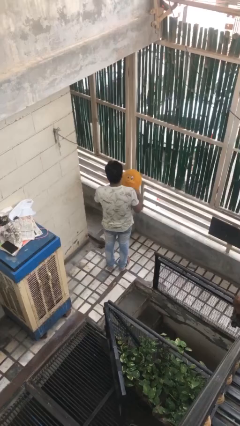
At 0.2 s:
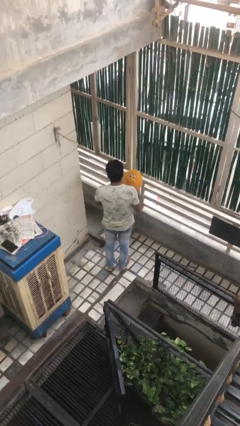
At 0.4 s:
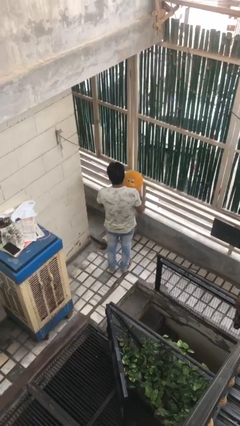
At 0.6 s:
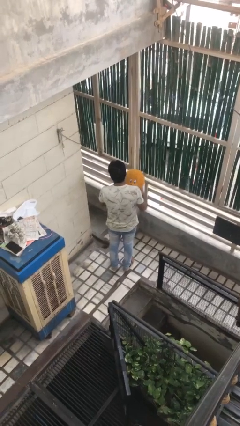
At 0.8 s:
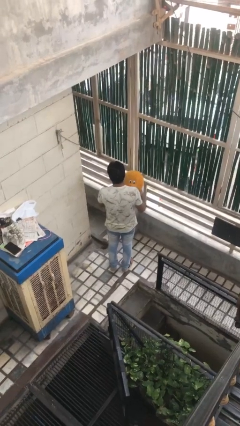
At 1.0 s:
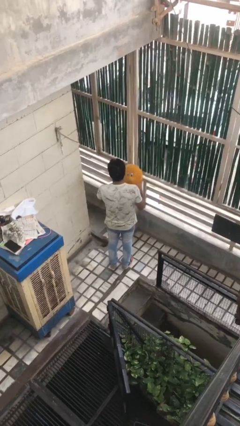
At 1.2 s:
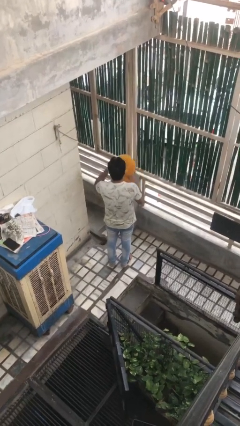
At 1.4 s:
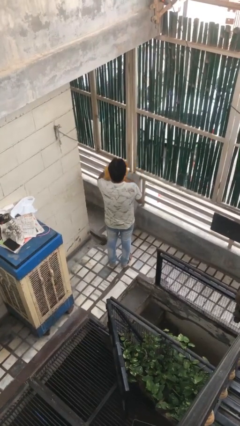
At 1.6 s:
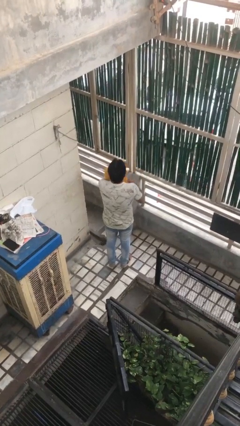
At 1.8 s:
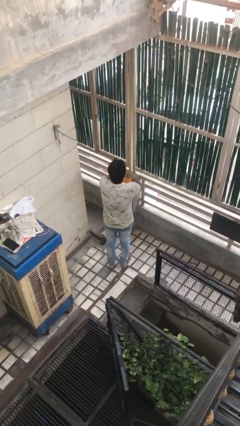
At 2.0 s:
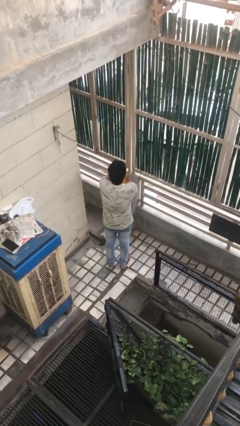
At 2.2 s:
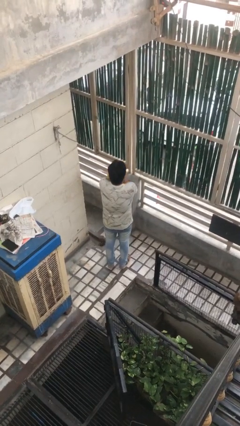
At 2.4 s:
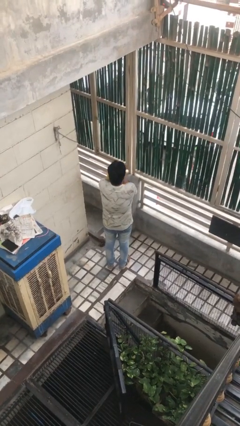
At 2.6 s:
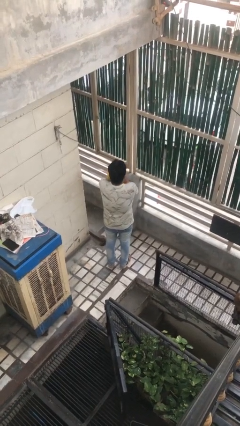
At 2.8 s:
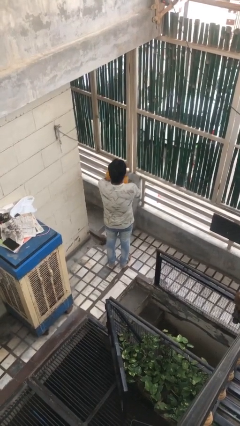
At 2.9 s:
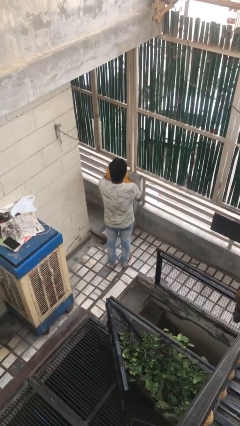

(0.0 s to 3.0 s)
person hugs stuffed animal

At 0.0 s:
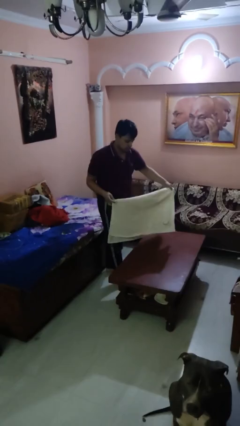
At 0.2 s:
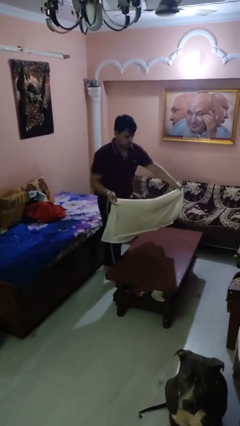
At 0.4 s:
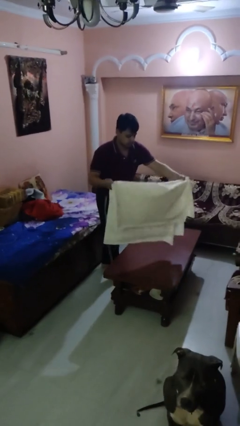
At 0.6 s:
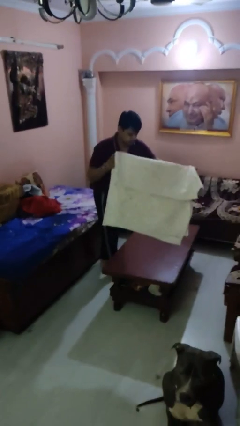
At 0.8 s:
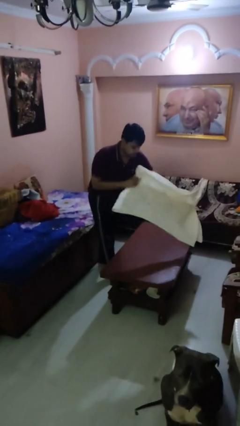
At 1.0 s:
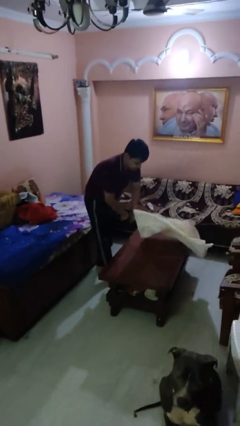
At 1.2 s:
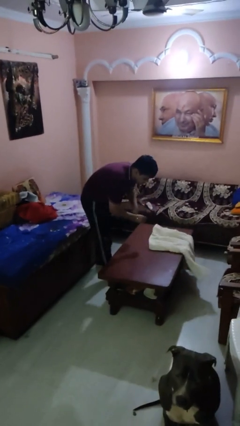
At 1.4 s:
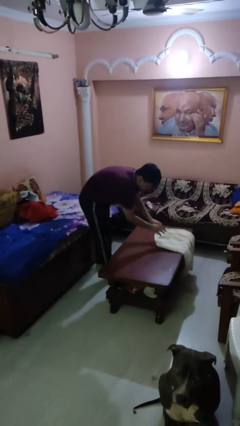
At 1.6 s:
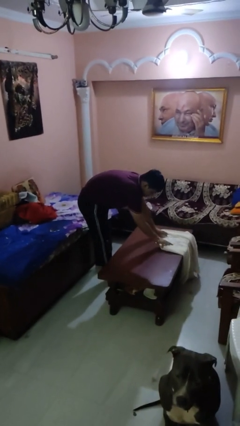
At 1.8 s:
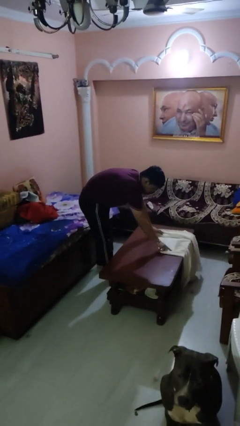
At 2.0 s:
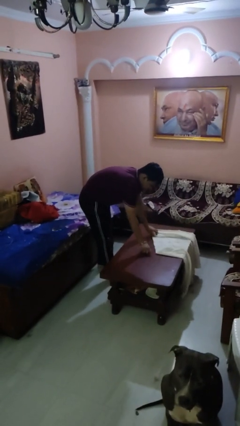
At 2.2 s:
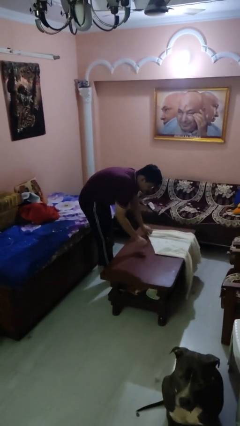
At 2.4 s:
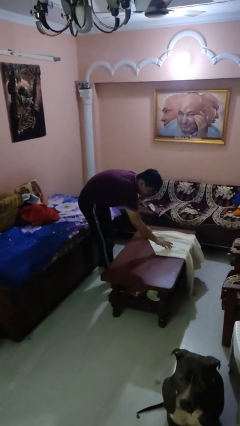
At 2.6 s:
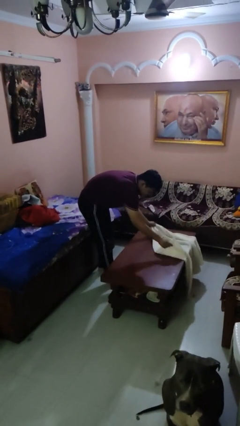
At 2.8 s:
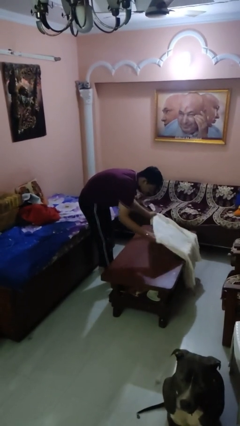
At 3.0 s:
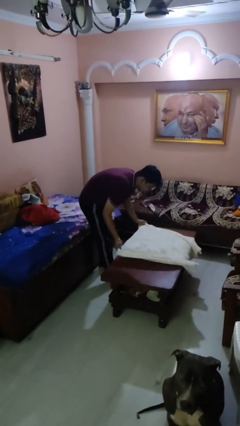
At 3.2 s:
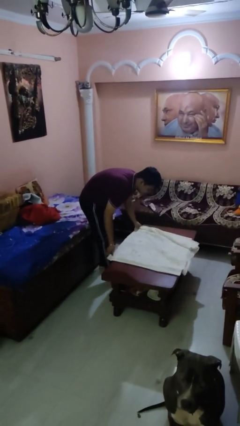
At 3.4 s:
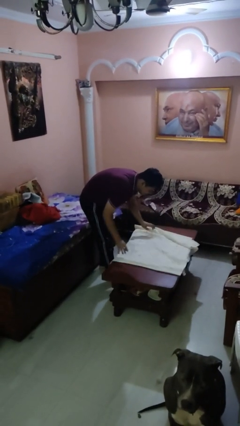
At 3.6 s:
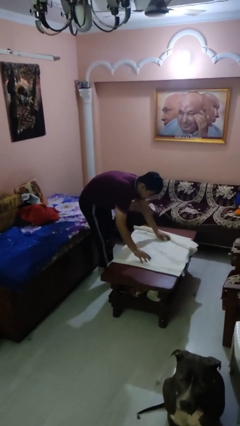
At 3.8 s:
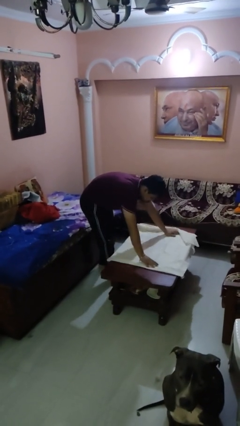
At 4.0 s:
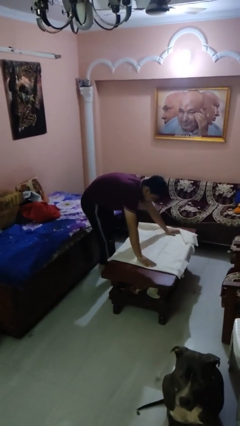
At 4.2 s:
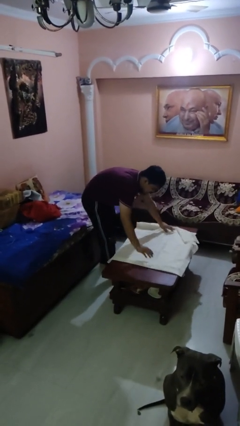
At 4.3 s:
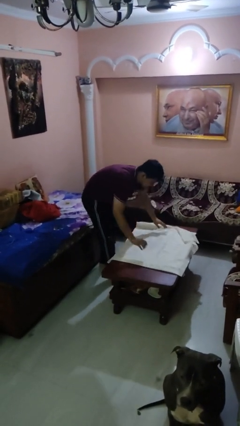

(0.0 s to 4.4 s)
person spreads tablecloth

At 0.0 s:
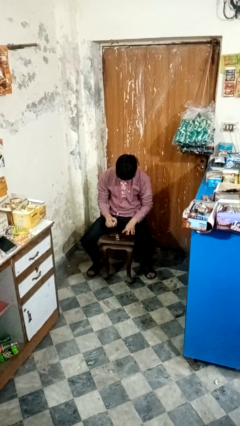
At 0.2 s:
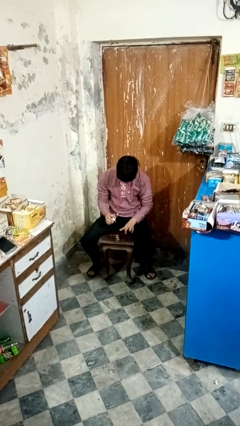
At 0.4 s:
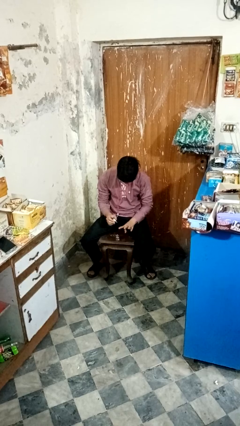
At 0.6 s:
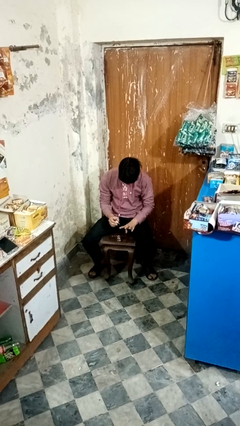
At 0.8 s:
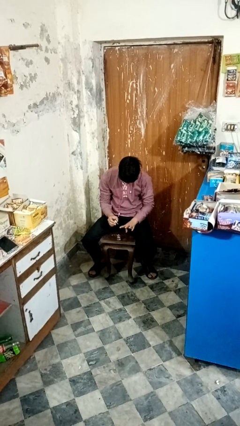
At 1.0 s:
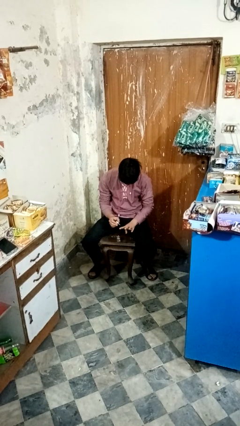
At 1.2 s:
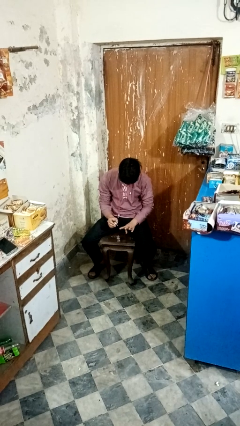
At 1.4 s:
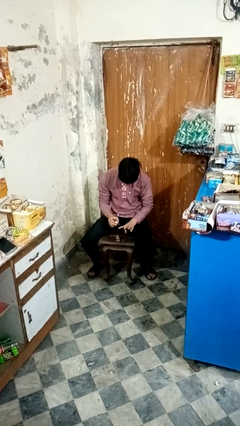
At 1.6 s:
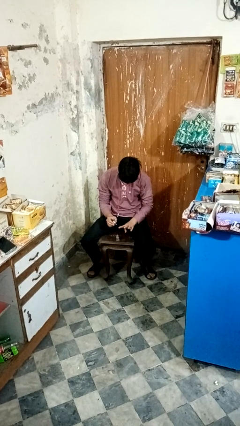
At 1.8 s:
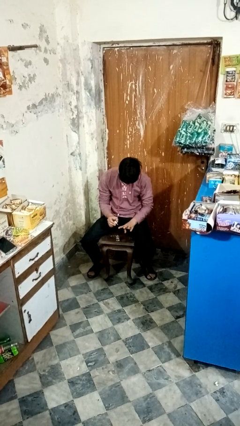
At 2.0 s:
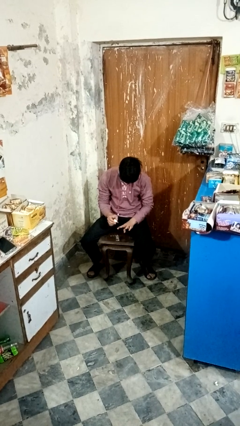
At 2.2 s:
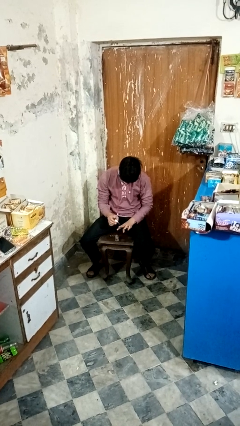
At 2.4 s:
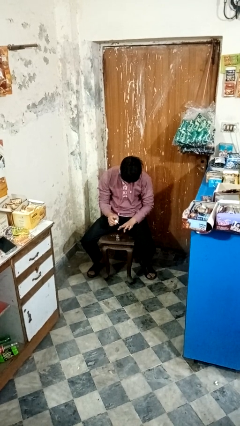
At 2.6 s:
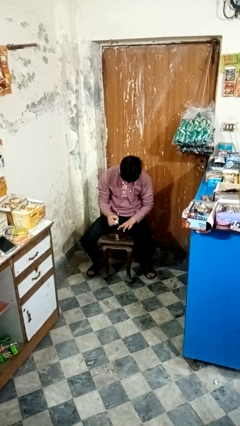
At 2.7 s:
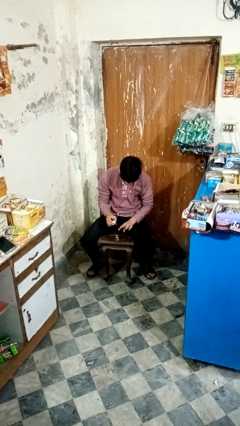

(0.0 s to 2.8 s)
person paints fingernails

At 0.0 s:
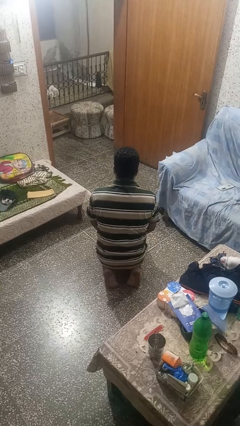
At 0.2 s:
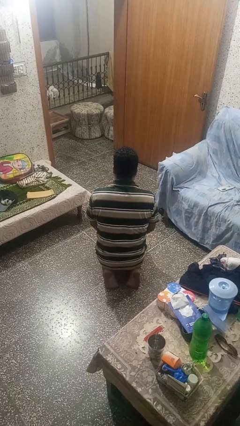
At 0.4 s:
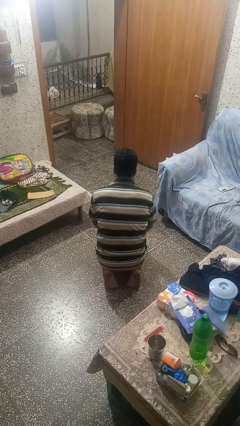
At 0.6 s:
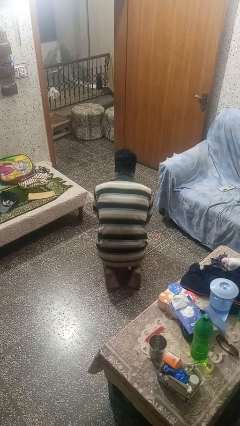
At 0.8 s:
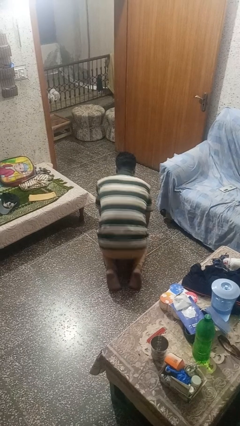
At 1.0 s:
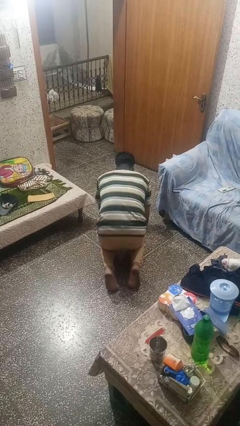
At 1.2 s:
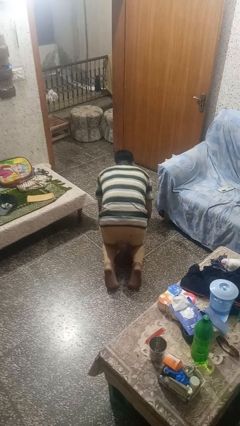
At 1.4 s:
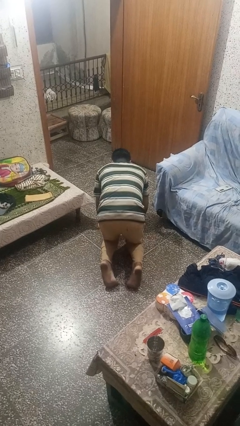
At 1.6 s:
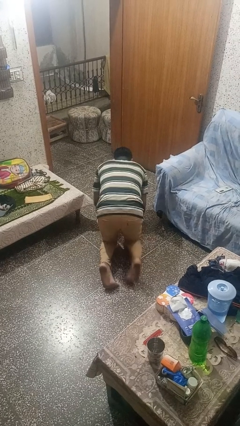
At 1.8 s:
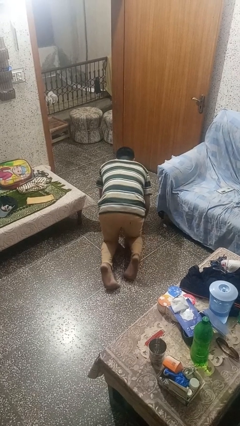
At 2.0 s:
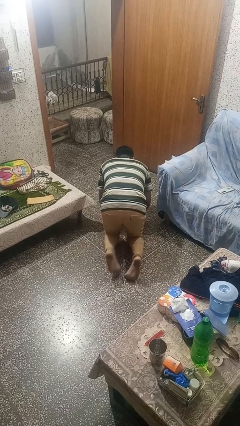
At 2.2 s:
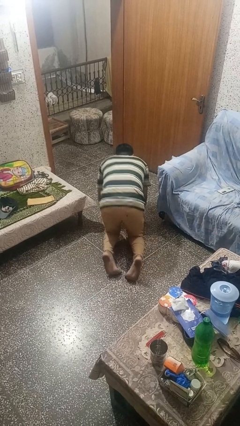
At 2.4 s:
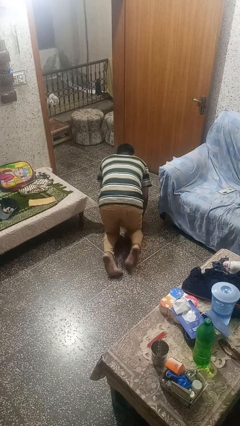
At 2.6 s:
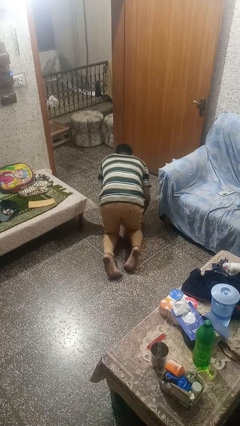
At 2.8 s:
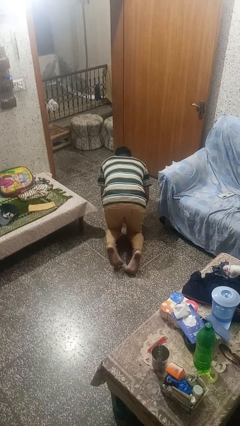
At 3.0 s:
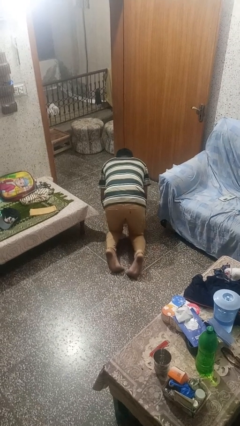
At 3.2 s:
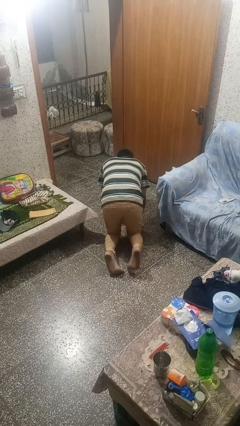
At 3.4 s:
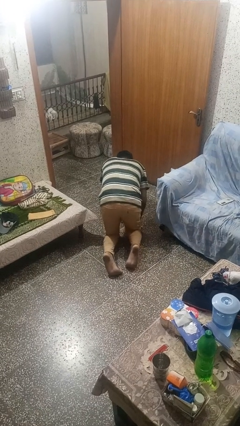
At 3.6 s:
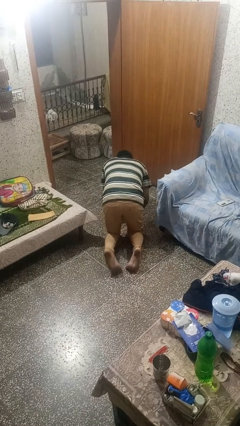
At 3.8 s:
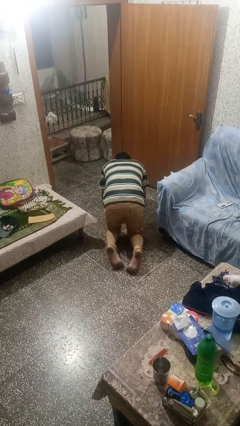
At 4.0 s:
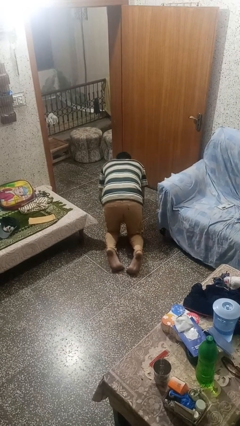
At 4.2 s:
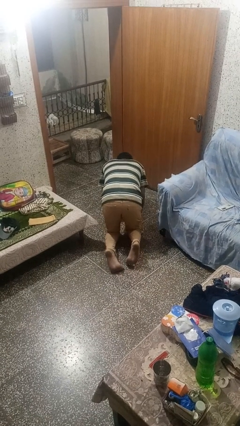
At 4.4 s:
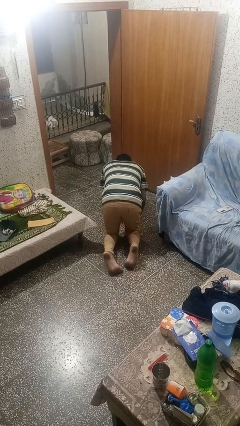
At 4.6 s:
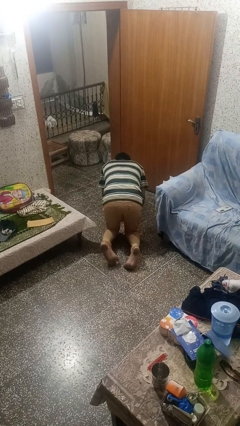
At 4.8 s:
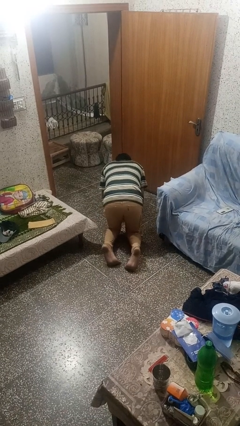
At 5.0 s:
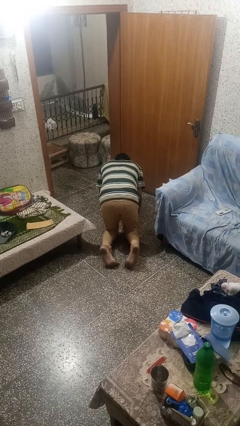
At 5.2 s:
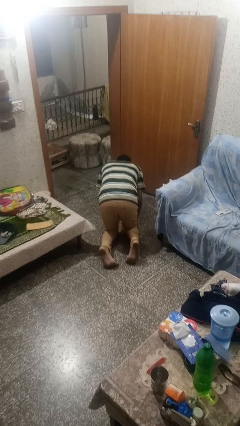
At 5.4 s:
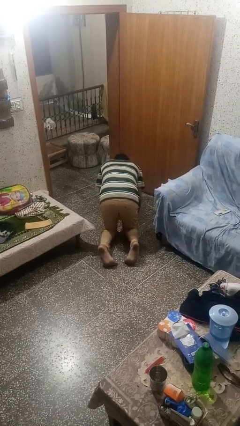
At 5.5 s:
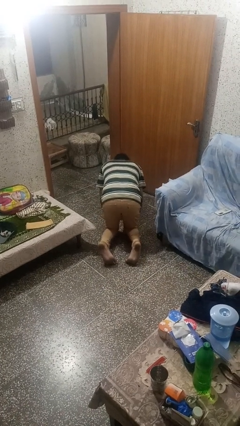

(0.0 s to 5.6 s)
person crawls

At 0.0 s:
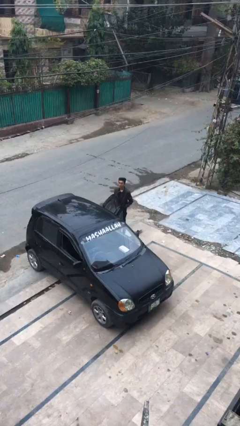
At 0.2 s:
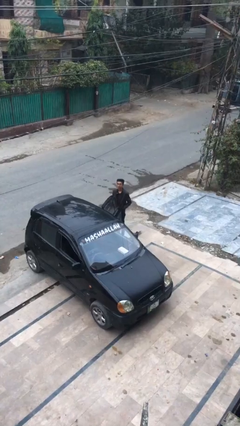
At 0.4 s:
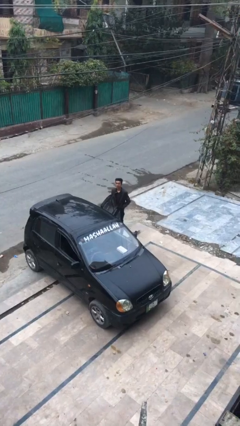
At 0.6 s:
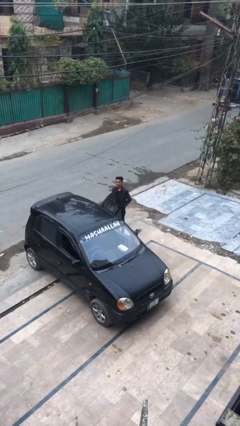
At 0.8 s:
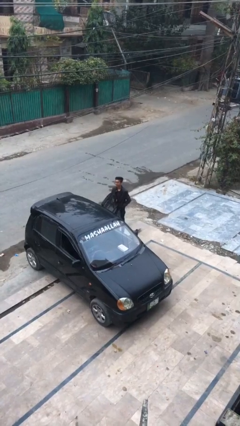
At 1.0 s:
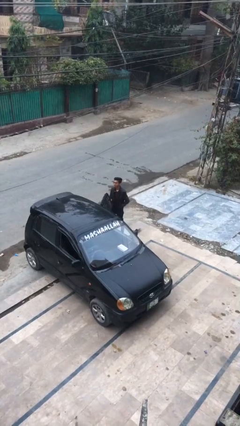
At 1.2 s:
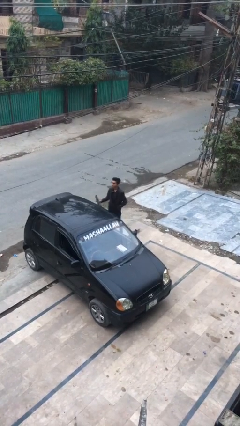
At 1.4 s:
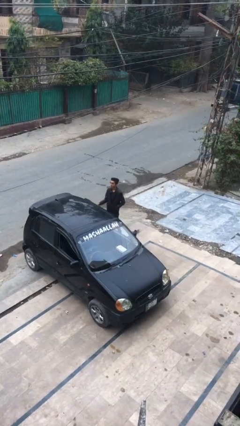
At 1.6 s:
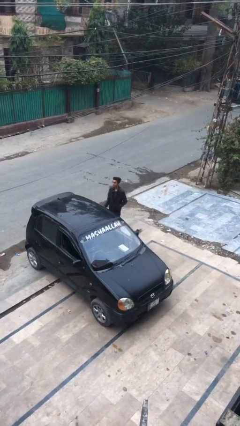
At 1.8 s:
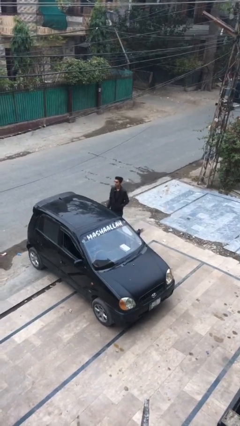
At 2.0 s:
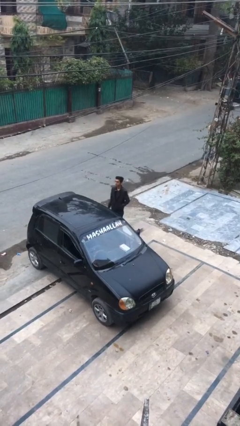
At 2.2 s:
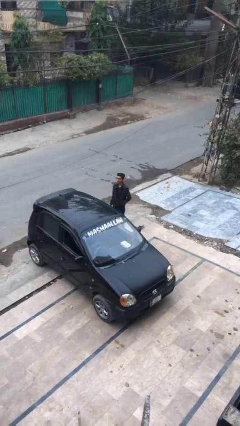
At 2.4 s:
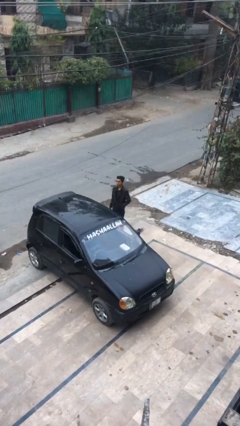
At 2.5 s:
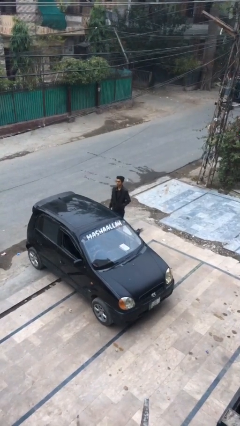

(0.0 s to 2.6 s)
person closes car door
